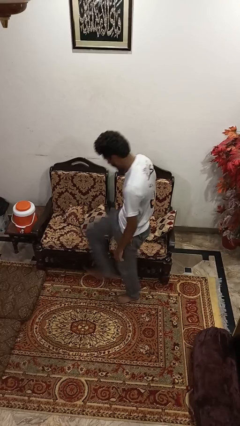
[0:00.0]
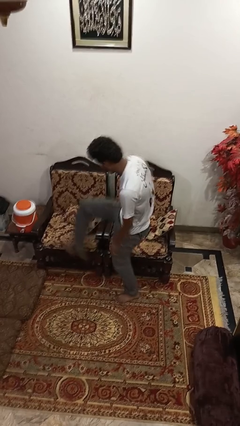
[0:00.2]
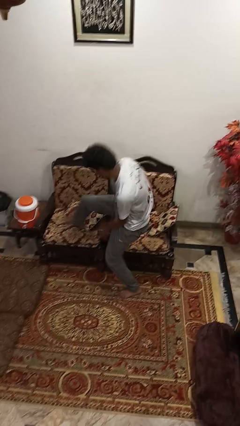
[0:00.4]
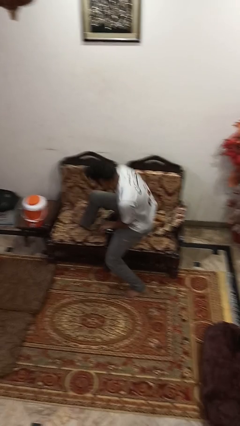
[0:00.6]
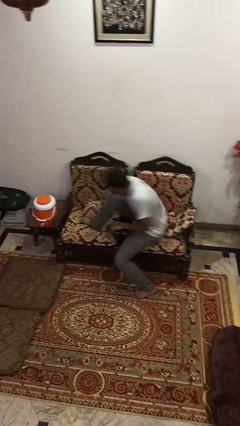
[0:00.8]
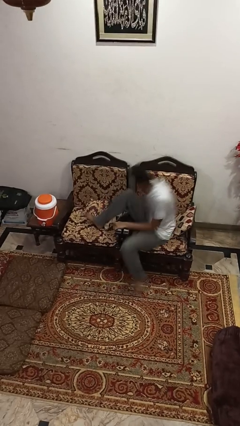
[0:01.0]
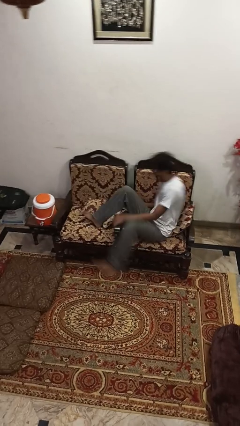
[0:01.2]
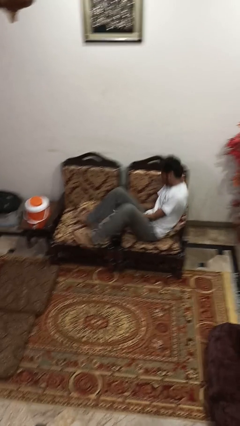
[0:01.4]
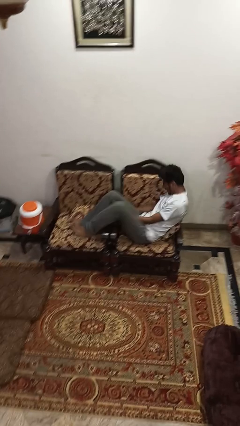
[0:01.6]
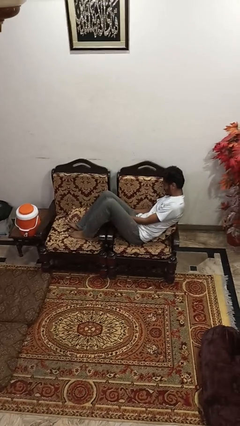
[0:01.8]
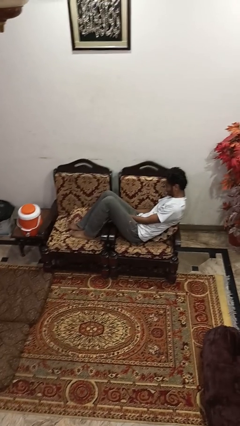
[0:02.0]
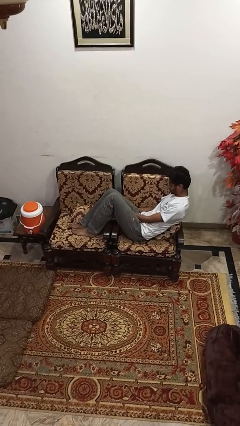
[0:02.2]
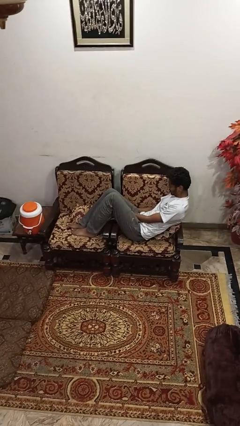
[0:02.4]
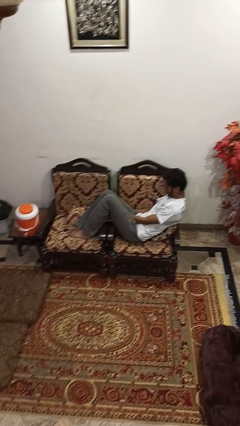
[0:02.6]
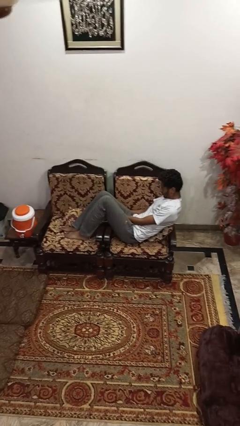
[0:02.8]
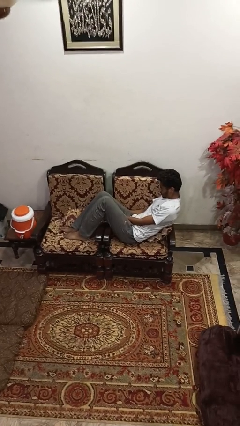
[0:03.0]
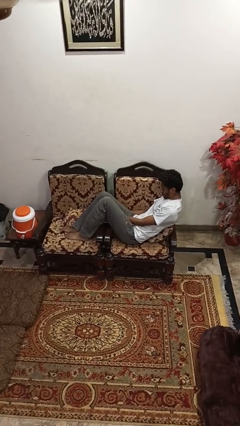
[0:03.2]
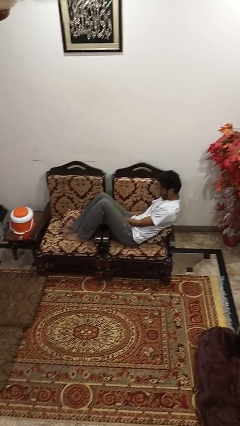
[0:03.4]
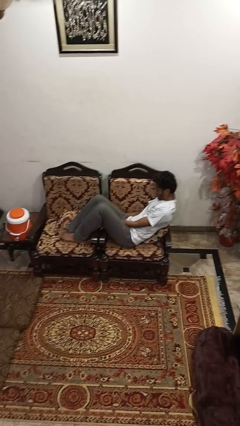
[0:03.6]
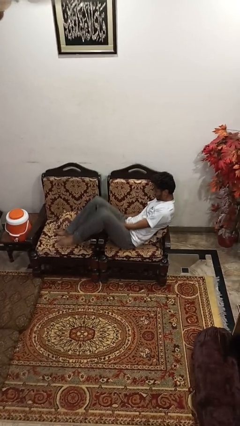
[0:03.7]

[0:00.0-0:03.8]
person lies down on couch

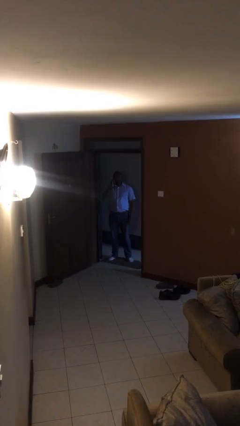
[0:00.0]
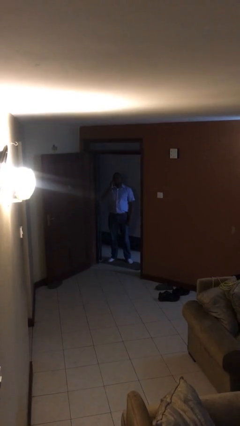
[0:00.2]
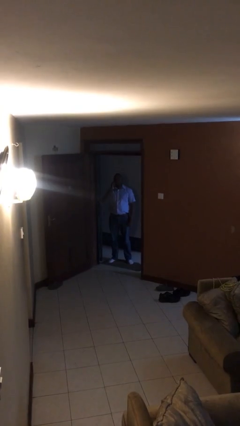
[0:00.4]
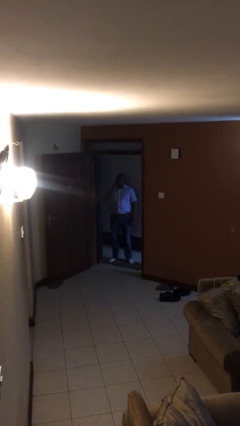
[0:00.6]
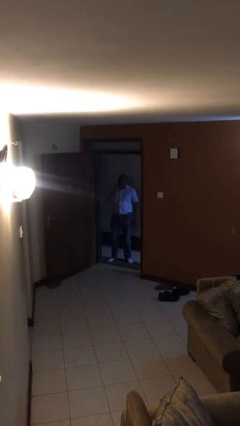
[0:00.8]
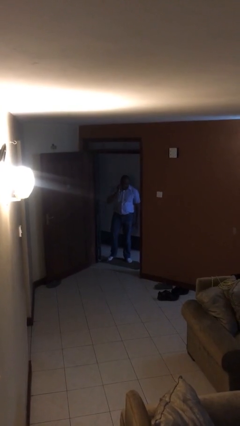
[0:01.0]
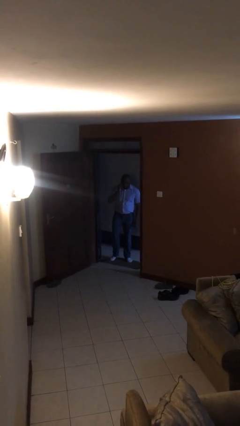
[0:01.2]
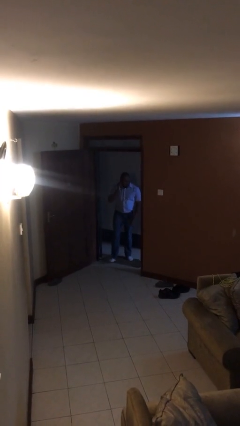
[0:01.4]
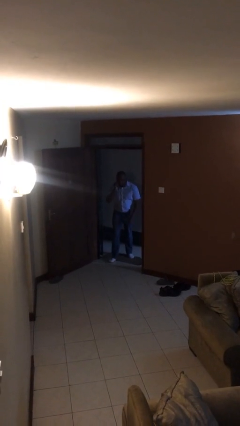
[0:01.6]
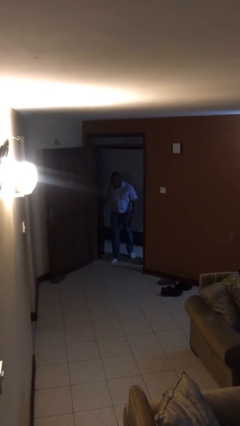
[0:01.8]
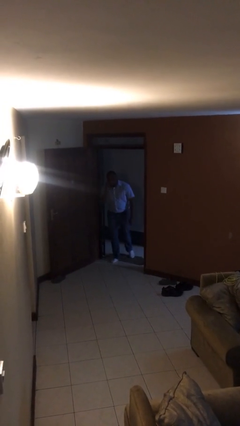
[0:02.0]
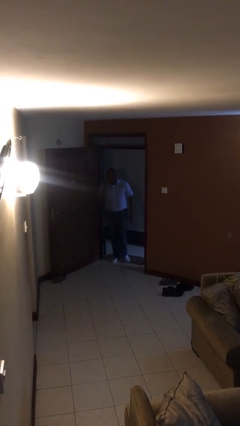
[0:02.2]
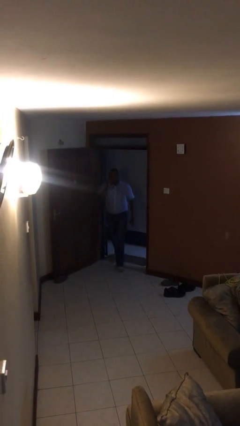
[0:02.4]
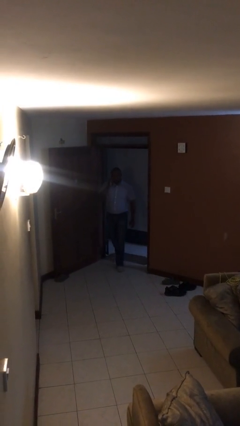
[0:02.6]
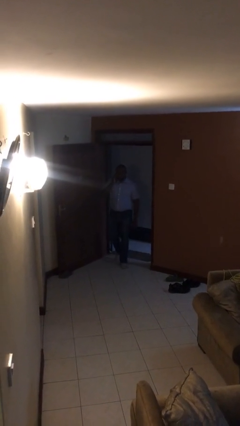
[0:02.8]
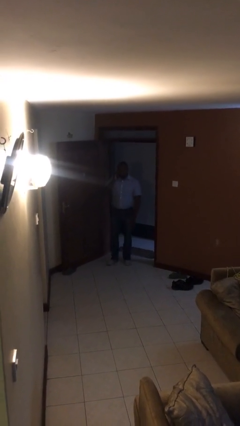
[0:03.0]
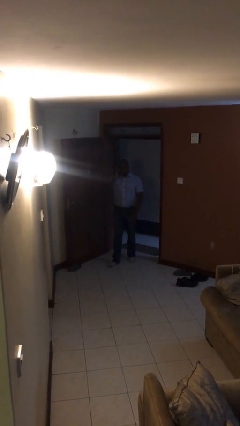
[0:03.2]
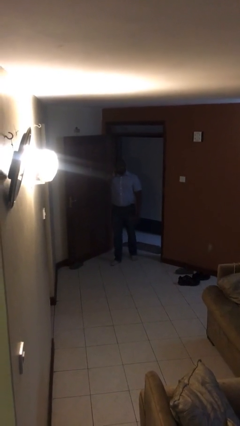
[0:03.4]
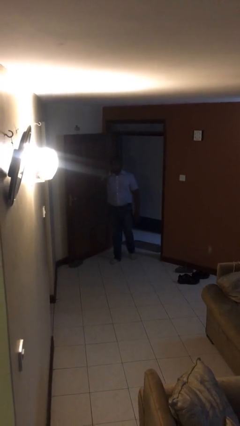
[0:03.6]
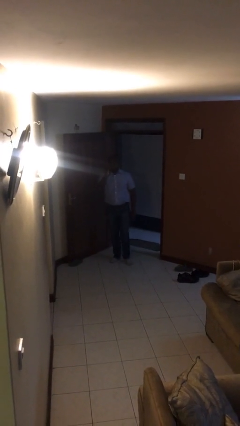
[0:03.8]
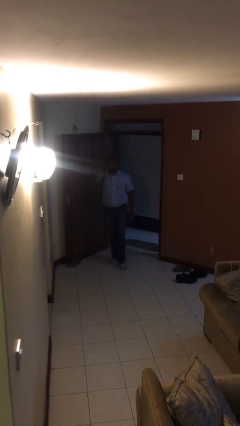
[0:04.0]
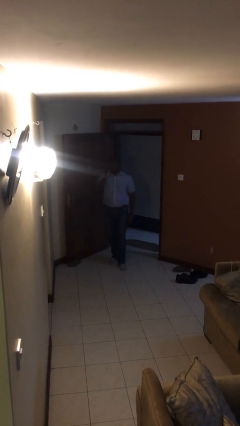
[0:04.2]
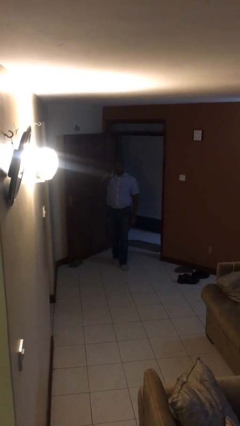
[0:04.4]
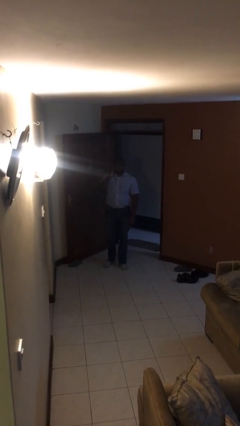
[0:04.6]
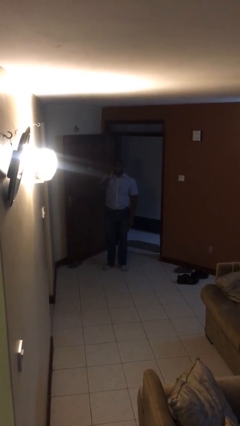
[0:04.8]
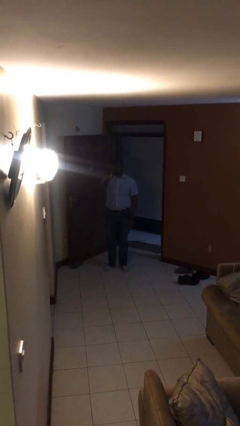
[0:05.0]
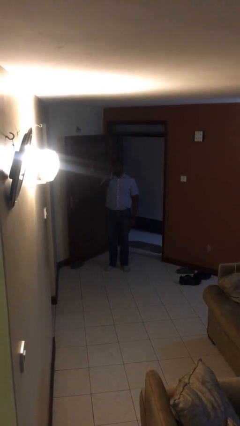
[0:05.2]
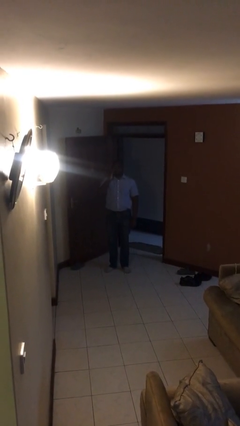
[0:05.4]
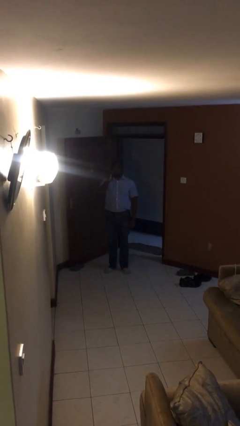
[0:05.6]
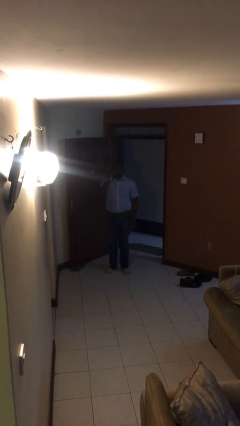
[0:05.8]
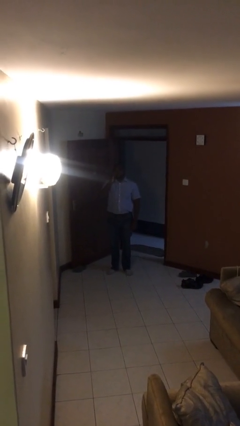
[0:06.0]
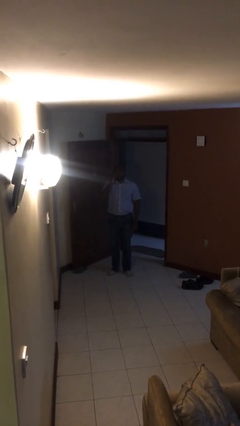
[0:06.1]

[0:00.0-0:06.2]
person enters scene through structure

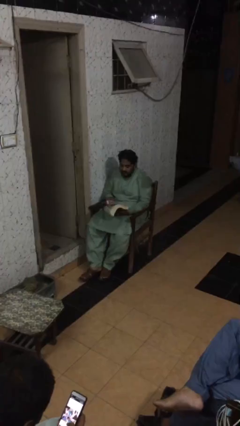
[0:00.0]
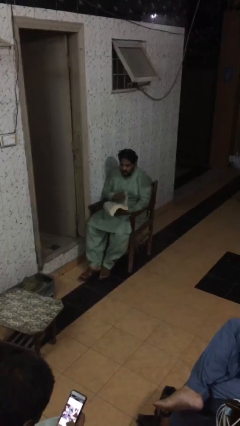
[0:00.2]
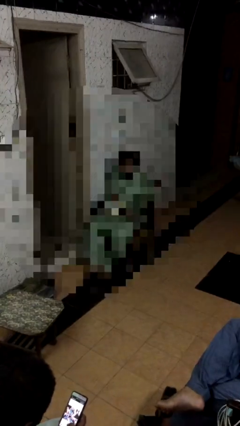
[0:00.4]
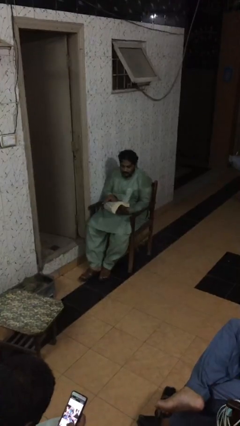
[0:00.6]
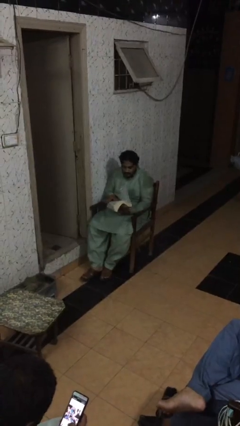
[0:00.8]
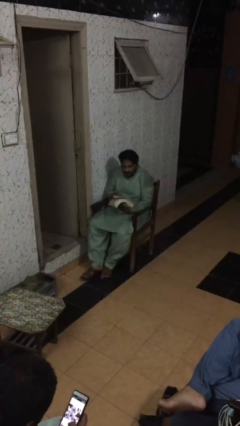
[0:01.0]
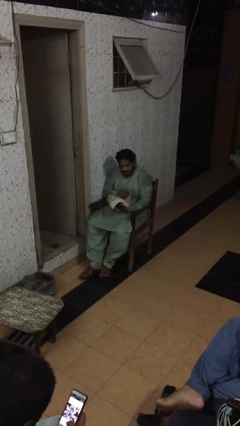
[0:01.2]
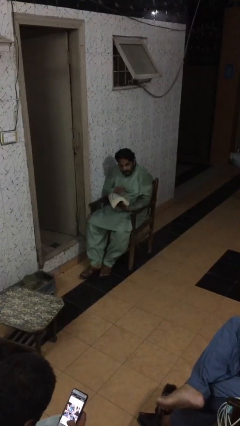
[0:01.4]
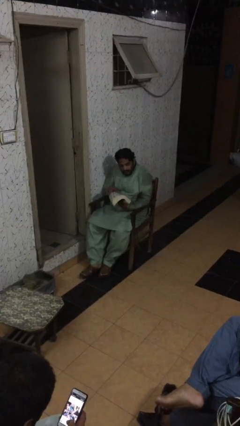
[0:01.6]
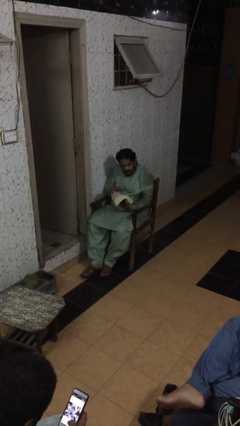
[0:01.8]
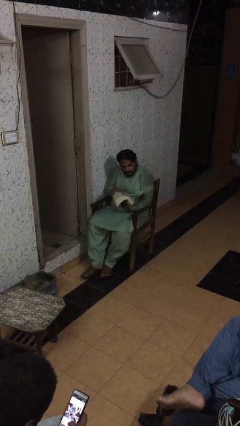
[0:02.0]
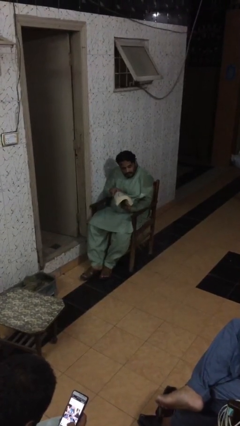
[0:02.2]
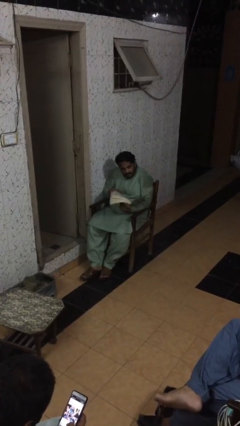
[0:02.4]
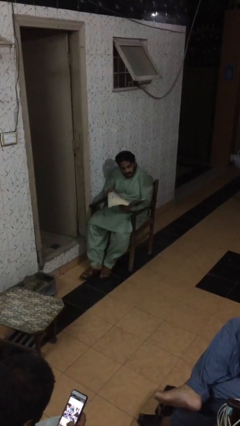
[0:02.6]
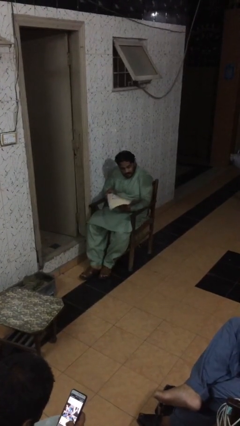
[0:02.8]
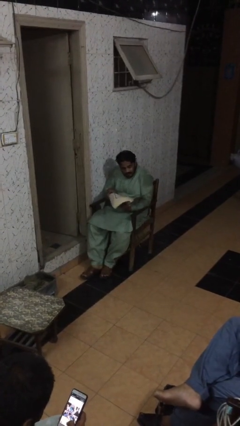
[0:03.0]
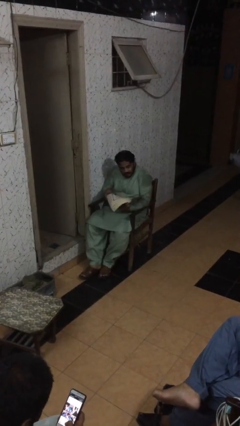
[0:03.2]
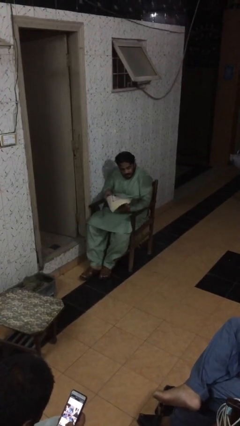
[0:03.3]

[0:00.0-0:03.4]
person reads document

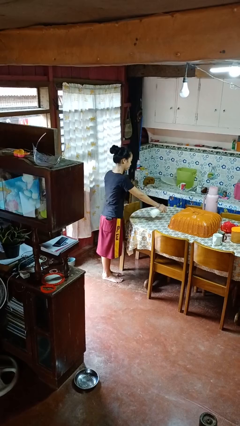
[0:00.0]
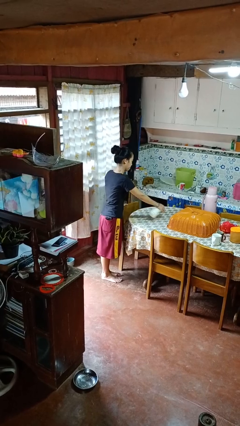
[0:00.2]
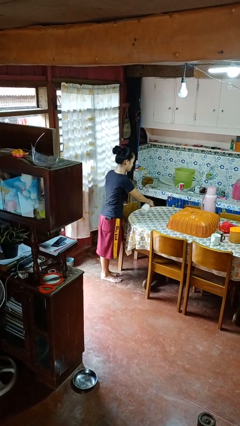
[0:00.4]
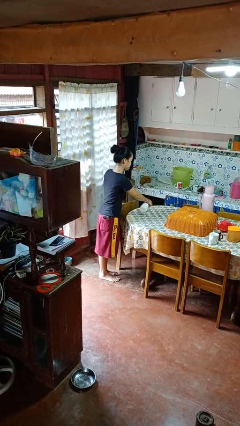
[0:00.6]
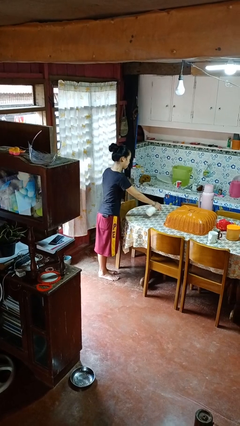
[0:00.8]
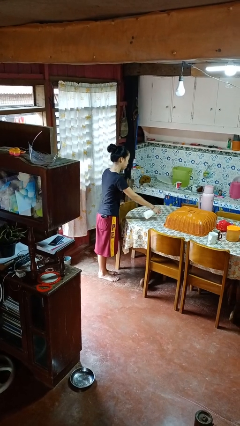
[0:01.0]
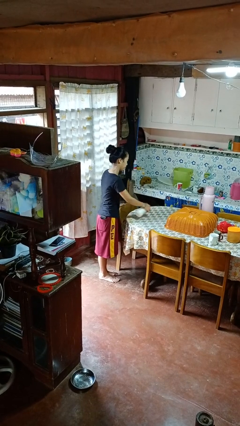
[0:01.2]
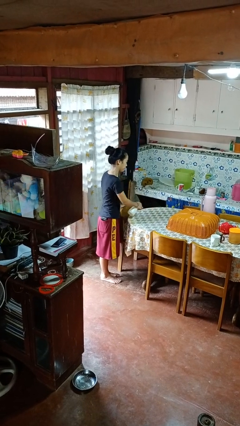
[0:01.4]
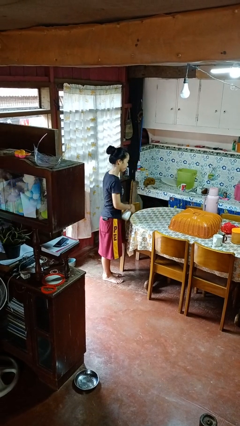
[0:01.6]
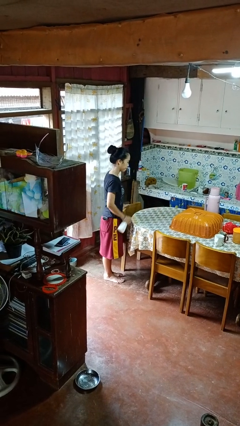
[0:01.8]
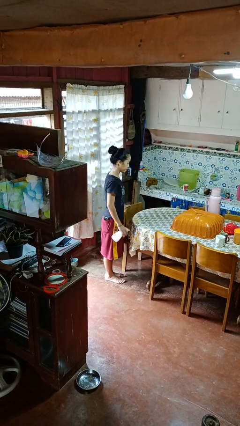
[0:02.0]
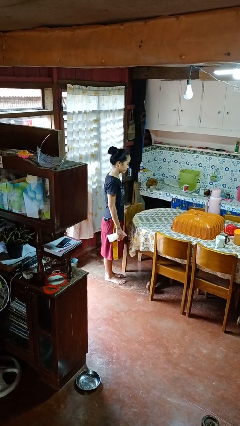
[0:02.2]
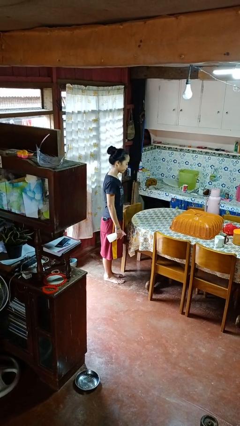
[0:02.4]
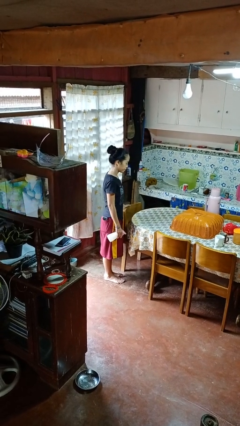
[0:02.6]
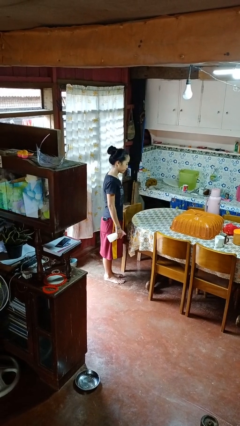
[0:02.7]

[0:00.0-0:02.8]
person sprays from bottle

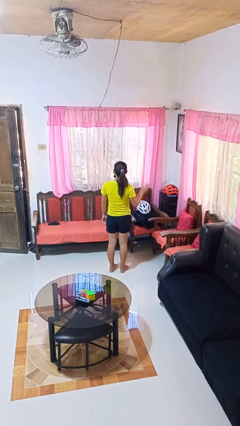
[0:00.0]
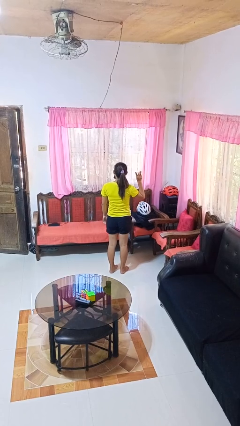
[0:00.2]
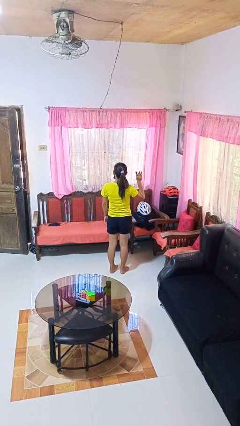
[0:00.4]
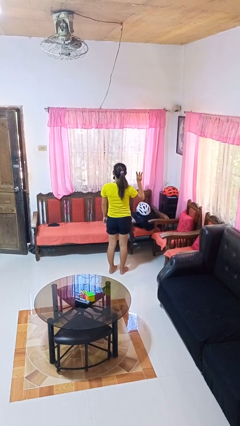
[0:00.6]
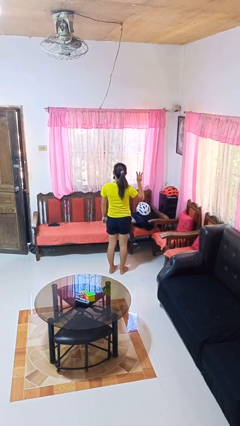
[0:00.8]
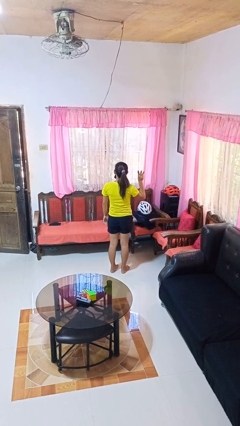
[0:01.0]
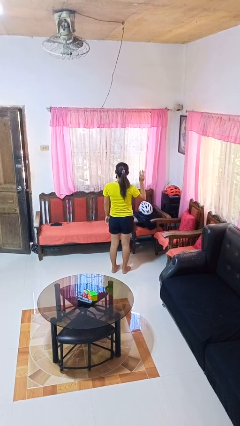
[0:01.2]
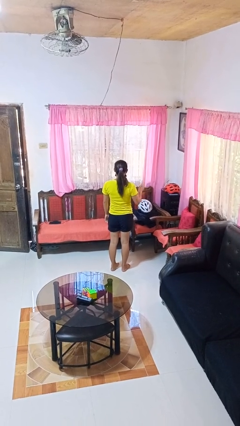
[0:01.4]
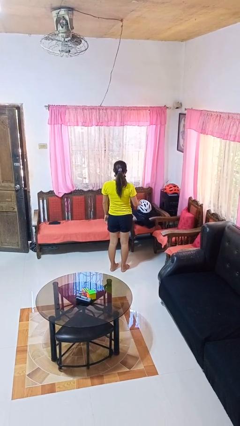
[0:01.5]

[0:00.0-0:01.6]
person gestures number three
